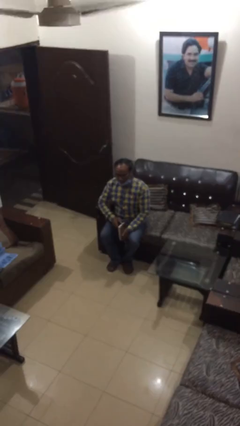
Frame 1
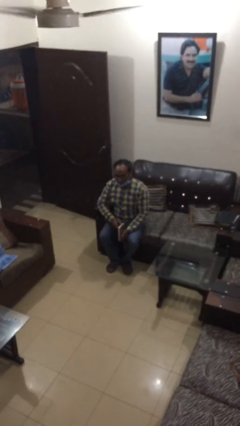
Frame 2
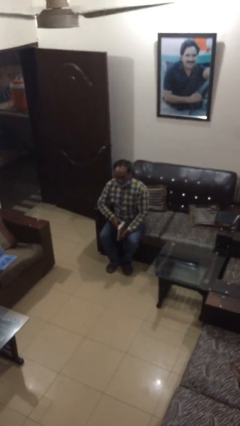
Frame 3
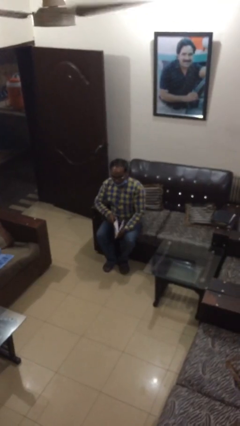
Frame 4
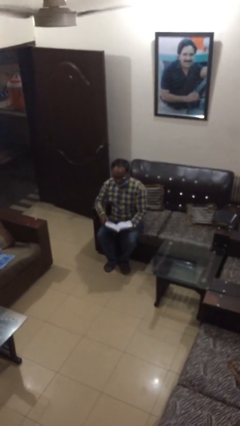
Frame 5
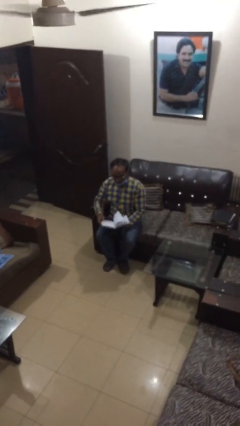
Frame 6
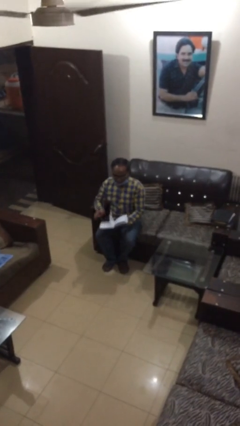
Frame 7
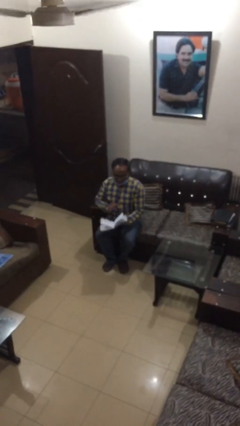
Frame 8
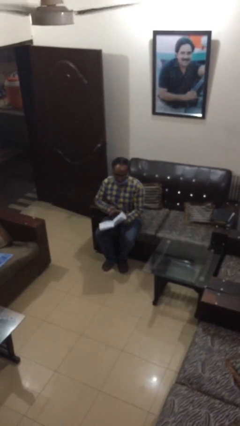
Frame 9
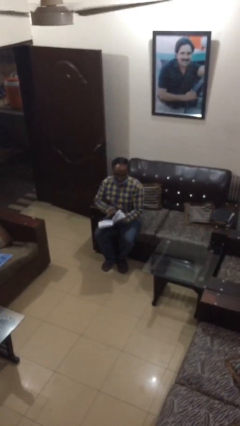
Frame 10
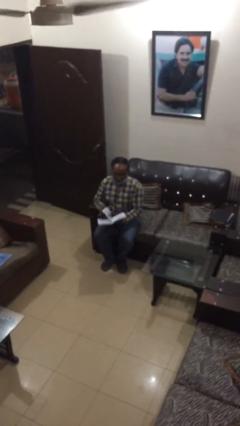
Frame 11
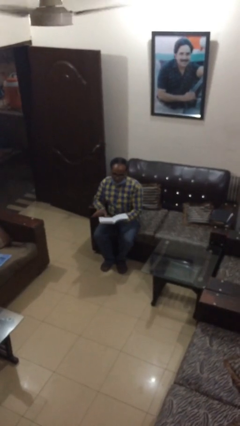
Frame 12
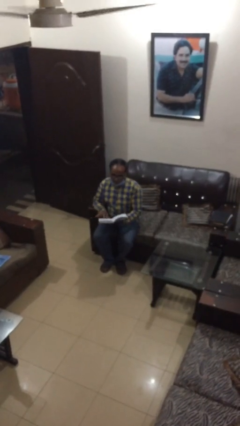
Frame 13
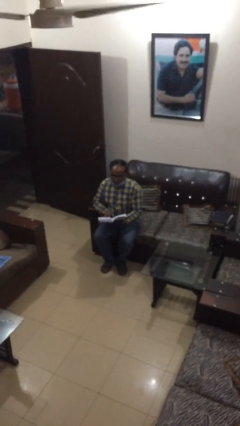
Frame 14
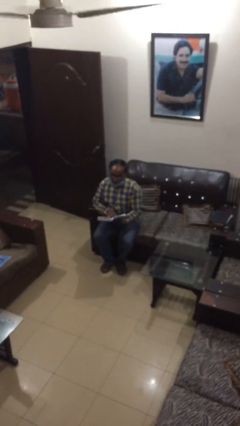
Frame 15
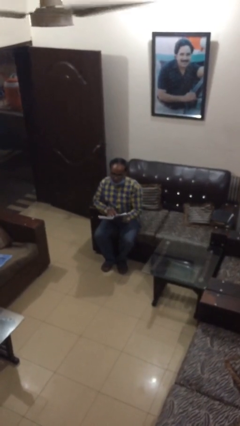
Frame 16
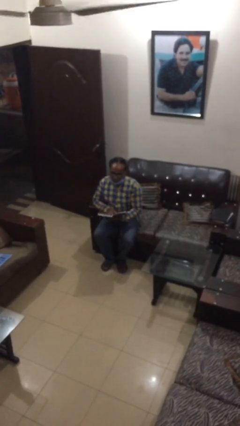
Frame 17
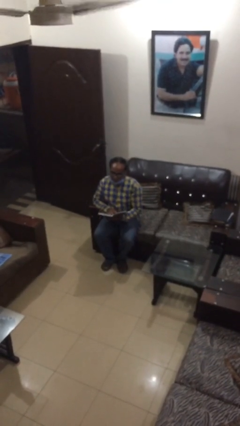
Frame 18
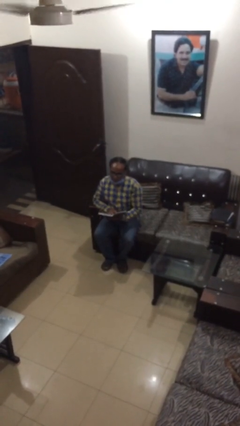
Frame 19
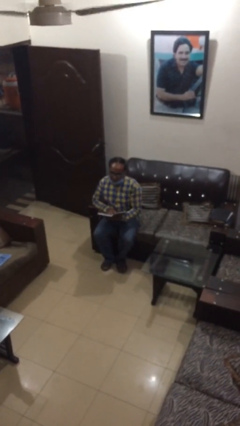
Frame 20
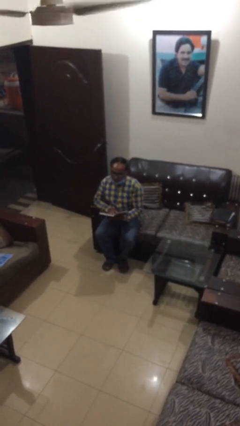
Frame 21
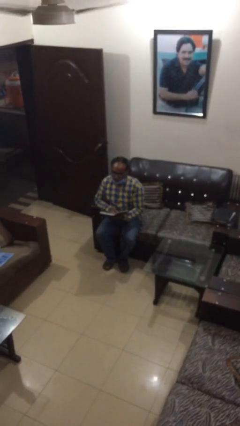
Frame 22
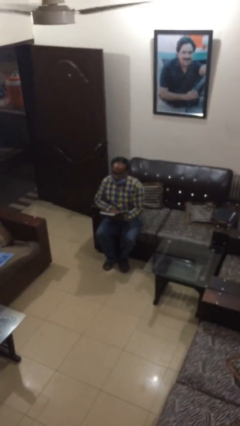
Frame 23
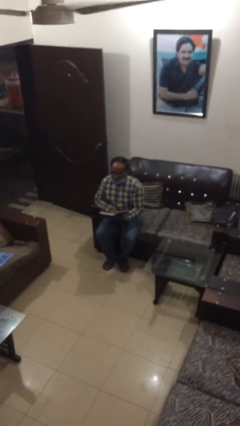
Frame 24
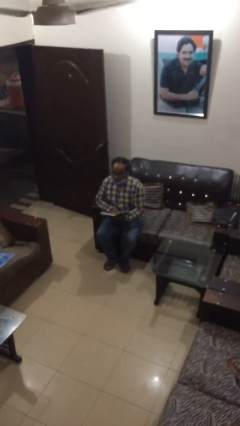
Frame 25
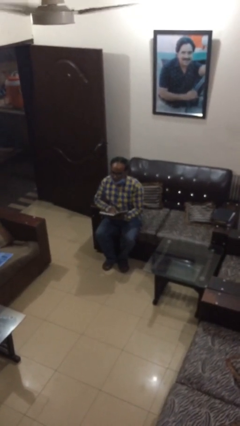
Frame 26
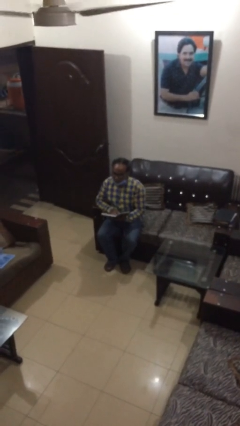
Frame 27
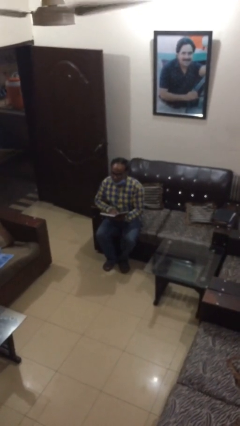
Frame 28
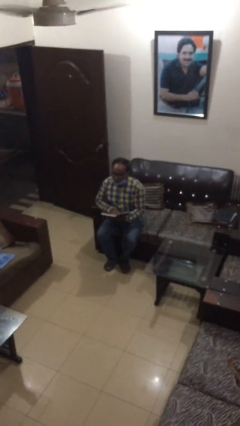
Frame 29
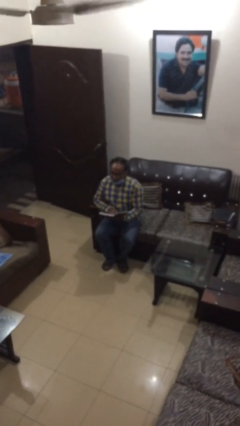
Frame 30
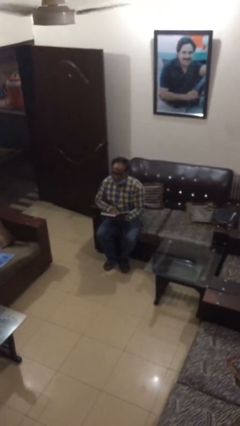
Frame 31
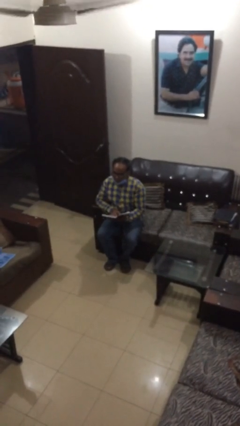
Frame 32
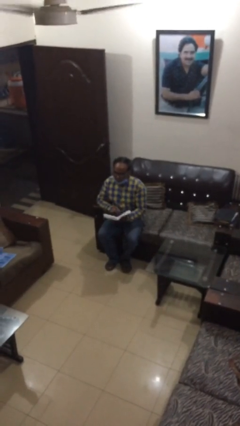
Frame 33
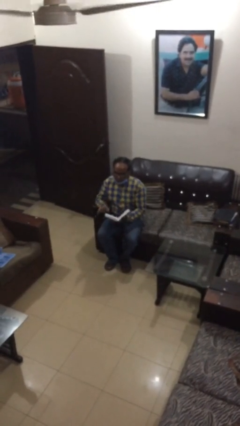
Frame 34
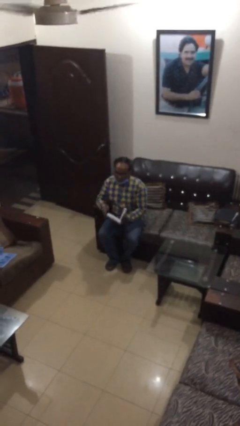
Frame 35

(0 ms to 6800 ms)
person reads document

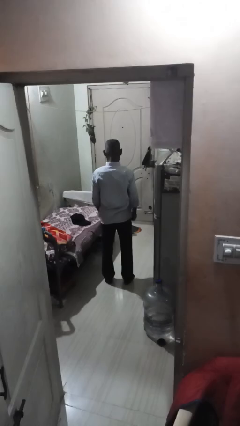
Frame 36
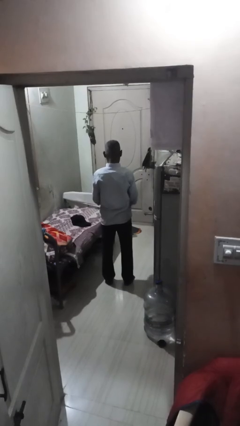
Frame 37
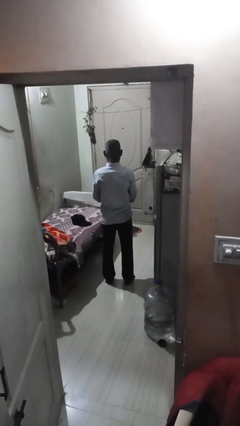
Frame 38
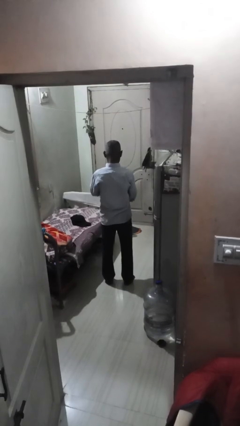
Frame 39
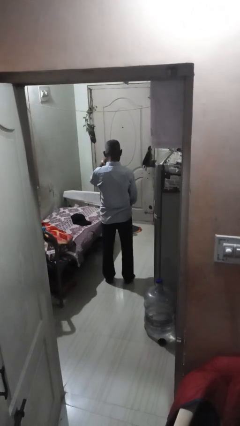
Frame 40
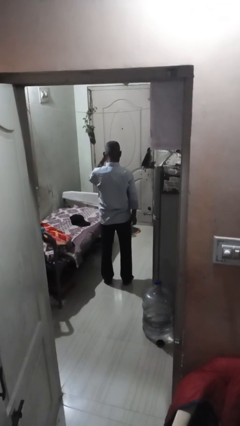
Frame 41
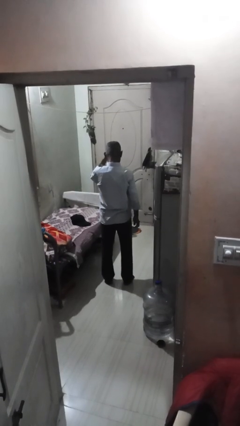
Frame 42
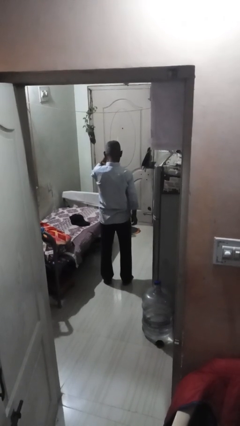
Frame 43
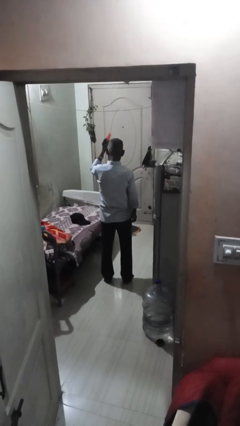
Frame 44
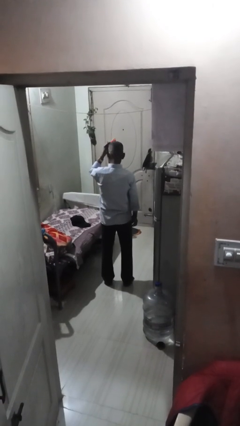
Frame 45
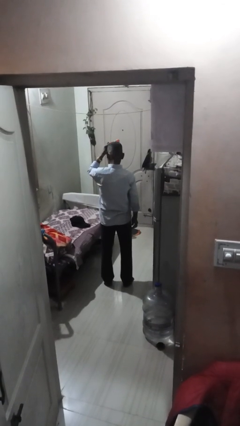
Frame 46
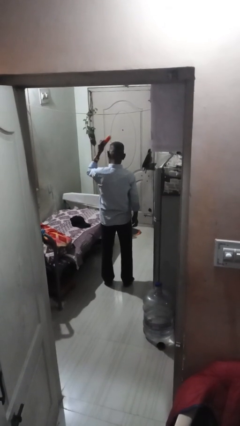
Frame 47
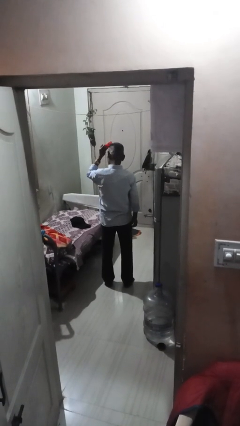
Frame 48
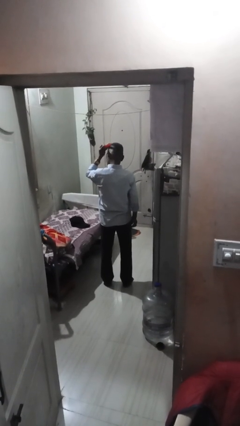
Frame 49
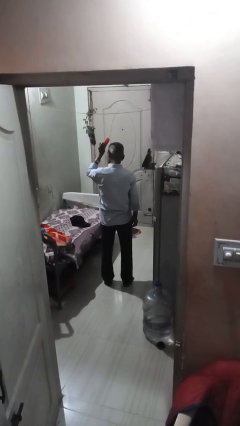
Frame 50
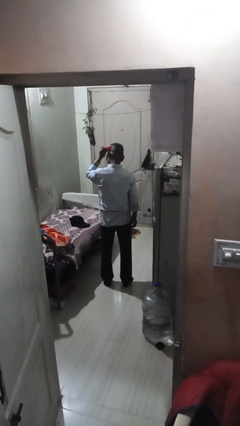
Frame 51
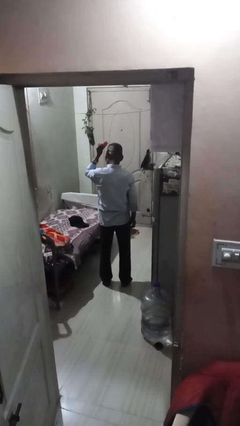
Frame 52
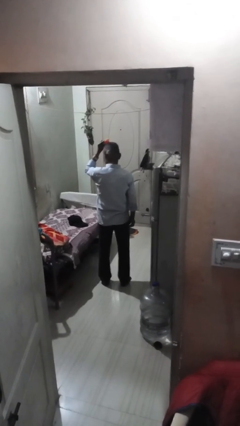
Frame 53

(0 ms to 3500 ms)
person brushes hair

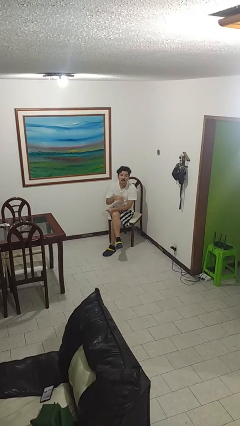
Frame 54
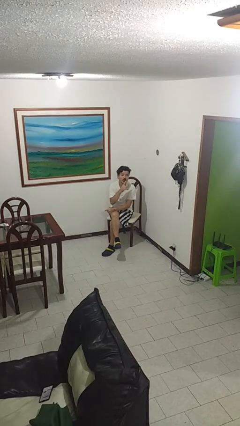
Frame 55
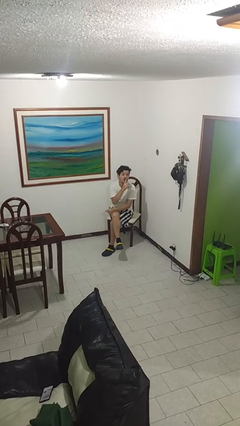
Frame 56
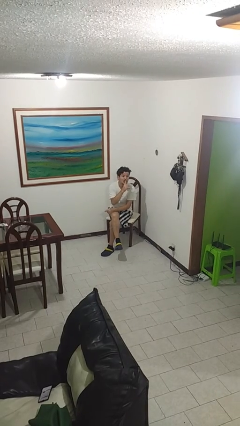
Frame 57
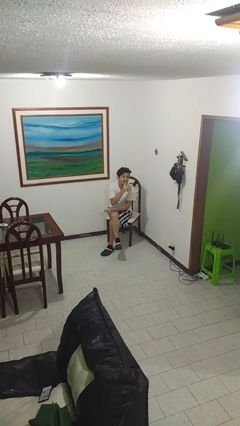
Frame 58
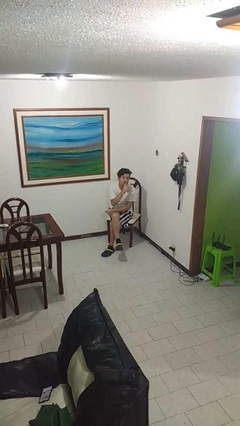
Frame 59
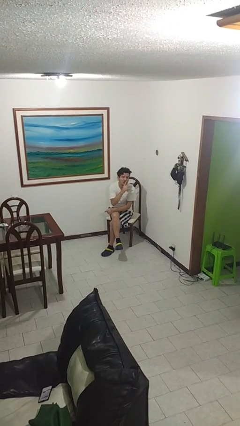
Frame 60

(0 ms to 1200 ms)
person gestures be quiet

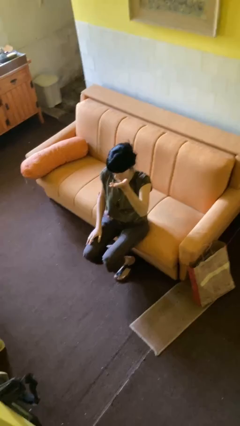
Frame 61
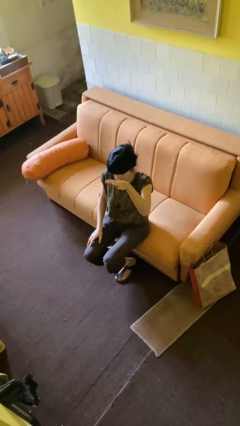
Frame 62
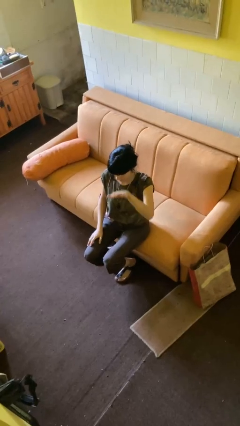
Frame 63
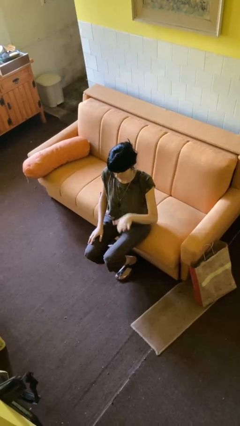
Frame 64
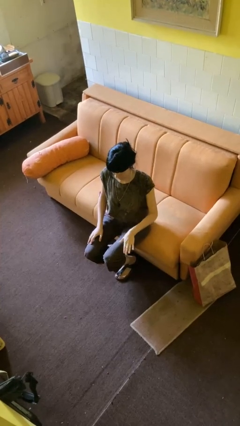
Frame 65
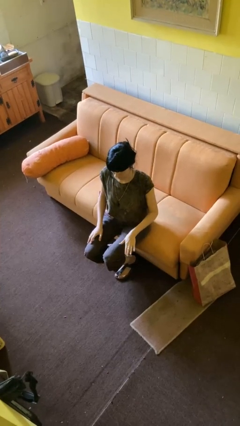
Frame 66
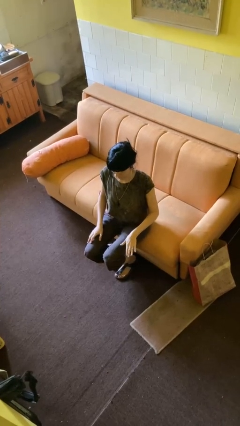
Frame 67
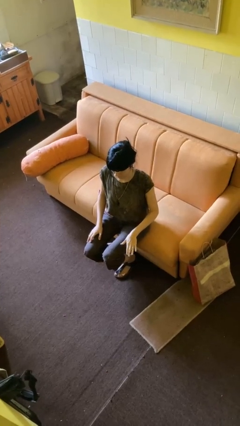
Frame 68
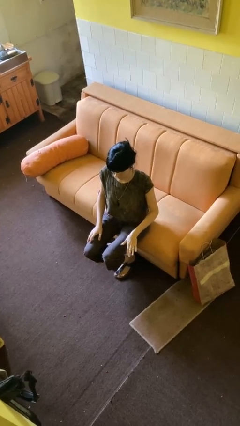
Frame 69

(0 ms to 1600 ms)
person gestures swipe down

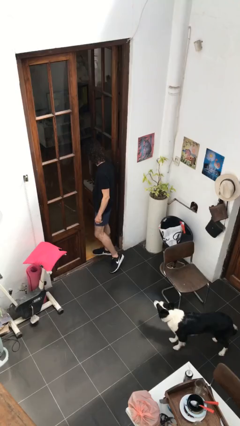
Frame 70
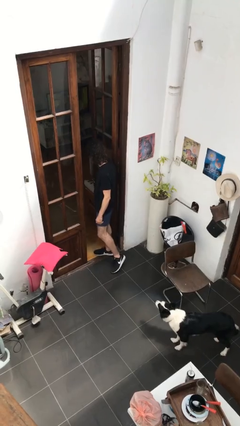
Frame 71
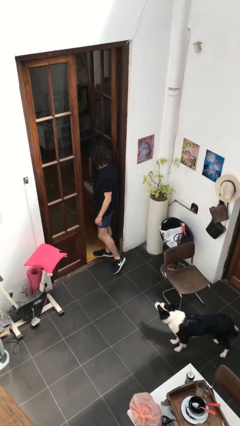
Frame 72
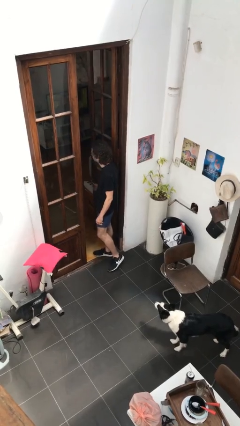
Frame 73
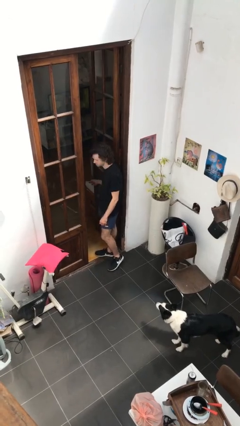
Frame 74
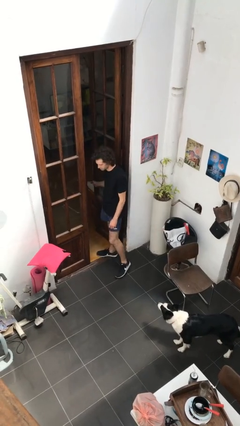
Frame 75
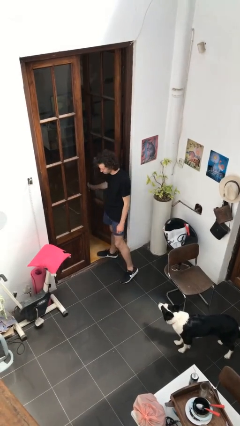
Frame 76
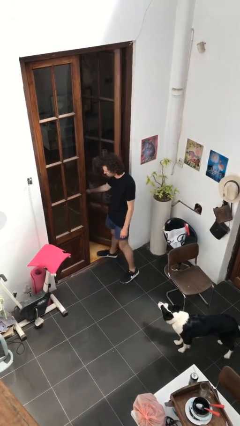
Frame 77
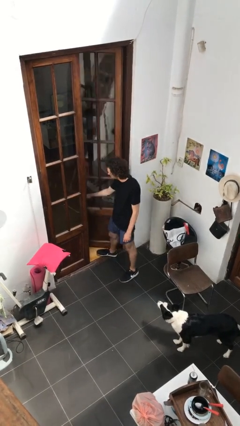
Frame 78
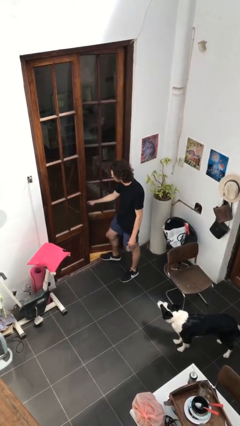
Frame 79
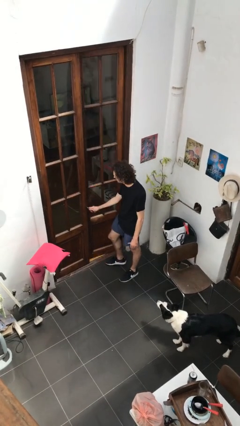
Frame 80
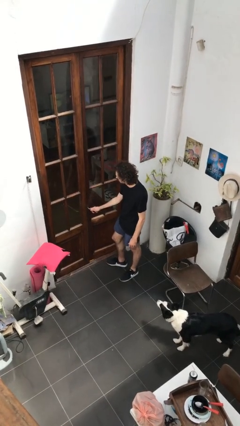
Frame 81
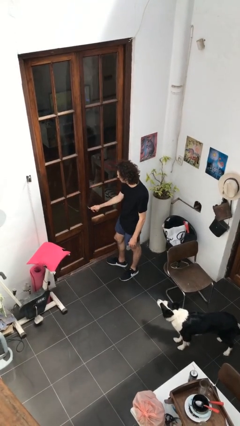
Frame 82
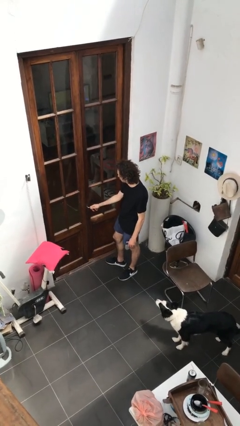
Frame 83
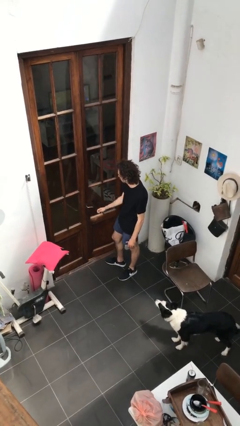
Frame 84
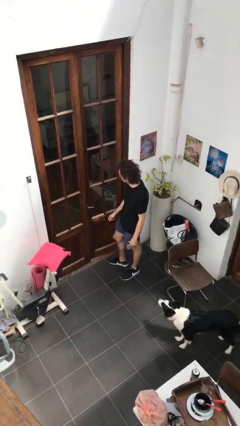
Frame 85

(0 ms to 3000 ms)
person closes facility door

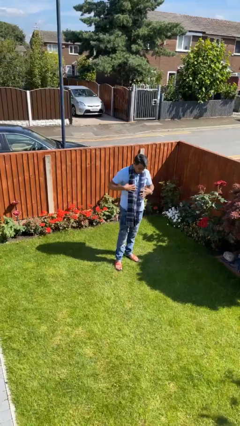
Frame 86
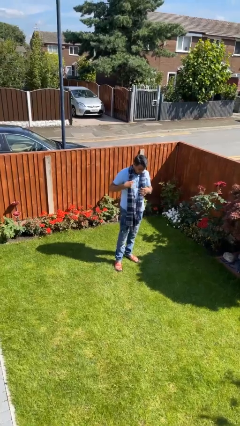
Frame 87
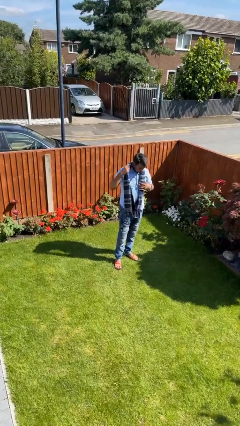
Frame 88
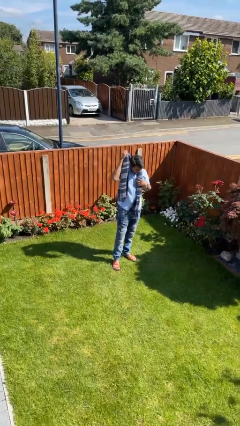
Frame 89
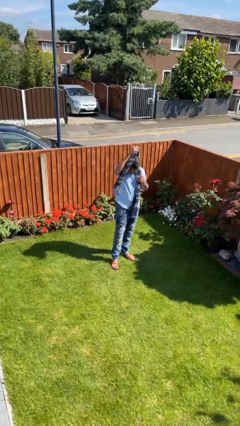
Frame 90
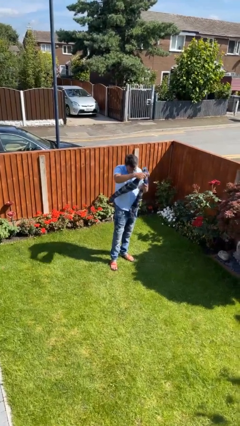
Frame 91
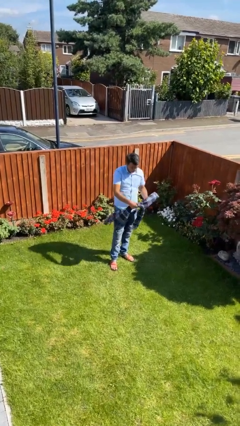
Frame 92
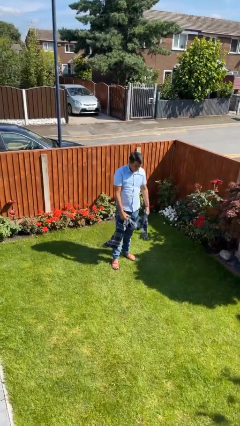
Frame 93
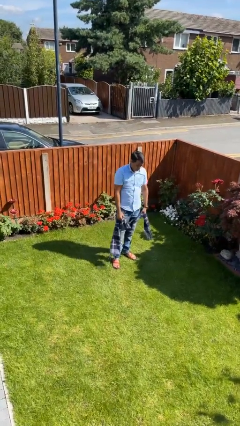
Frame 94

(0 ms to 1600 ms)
person takes off scarf
